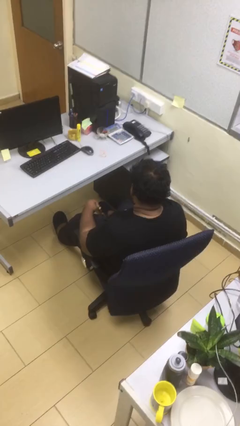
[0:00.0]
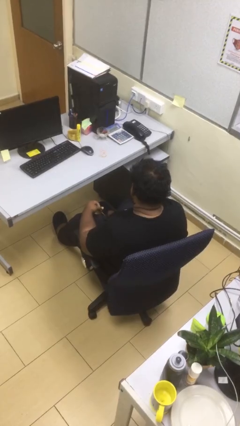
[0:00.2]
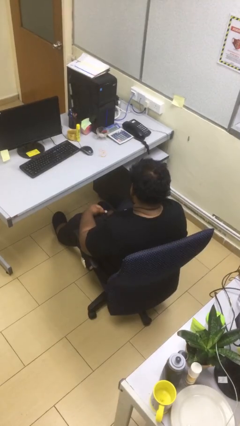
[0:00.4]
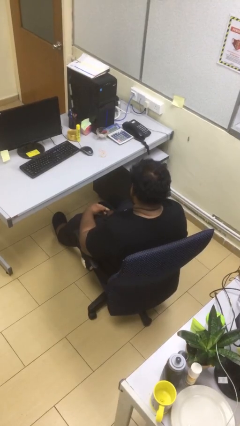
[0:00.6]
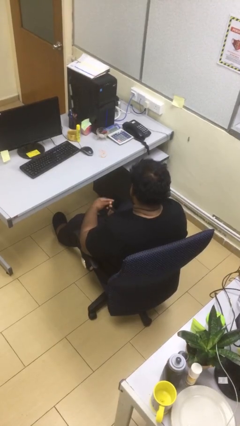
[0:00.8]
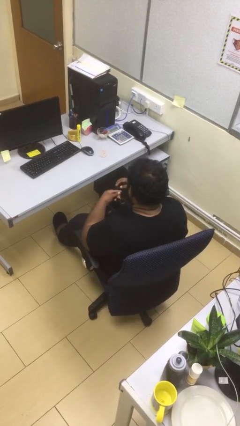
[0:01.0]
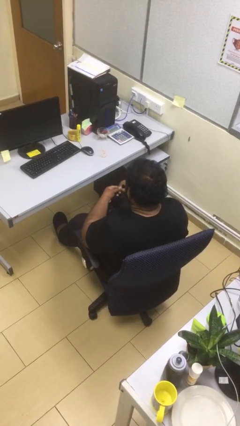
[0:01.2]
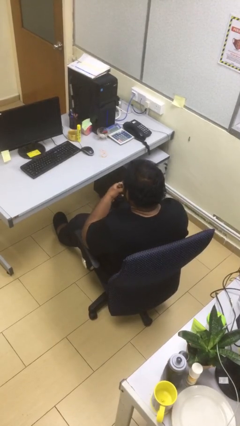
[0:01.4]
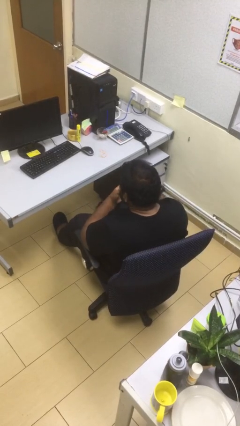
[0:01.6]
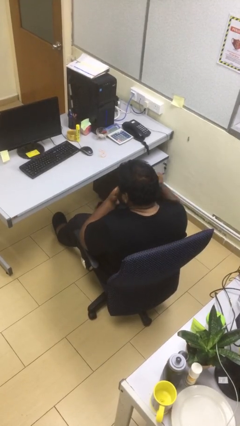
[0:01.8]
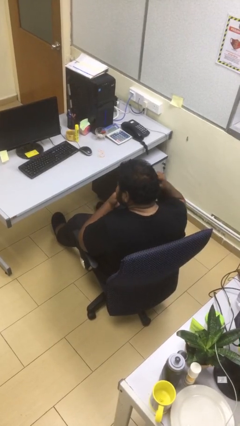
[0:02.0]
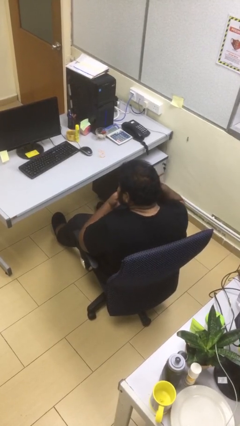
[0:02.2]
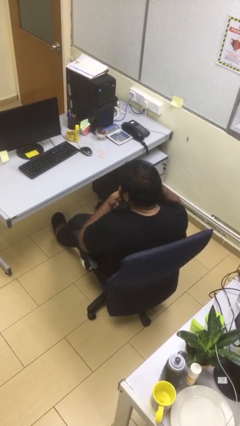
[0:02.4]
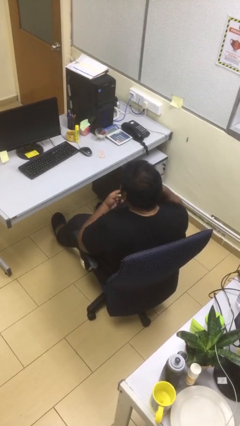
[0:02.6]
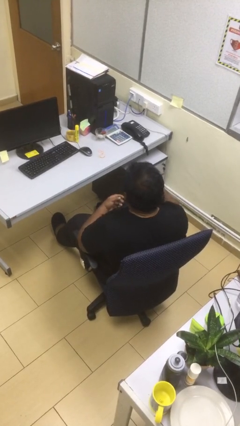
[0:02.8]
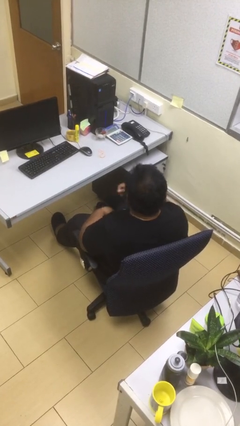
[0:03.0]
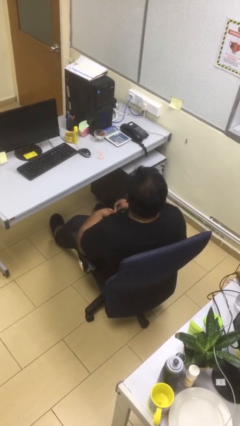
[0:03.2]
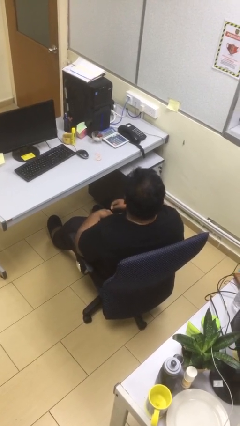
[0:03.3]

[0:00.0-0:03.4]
person puts on earrings

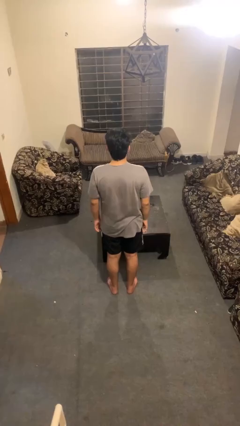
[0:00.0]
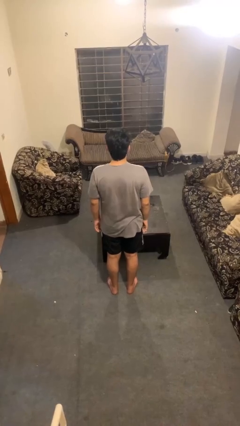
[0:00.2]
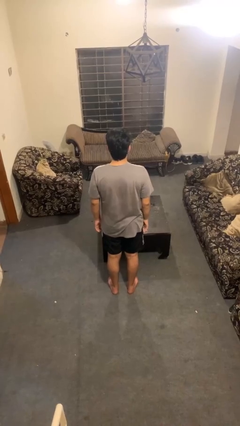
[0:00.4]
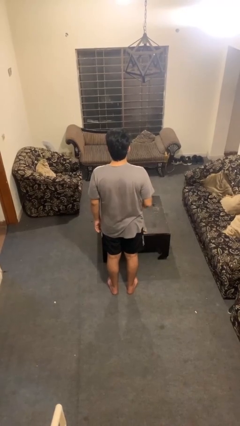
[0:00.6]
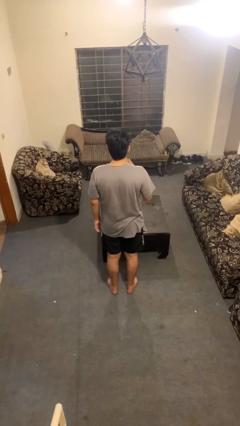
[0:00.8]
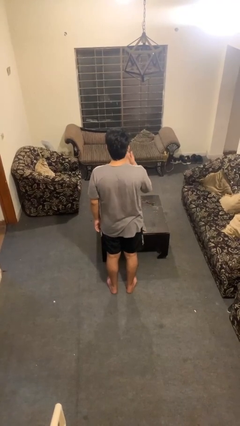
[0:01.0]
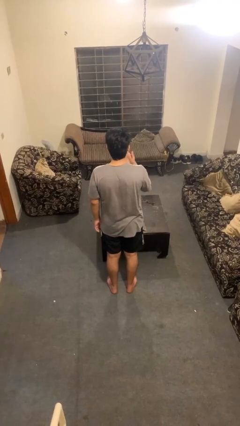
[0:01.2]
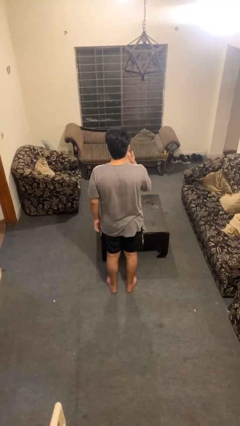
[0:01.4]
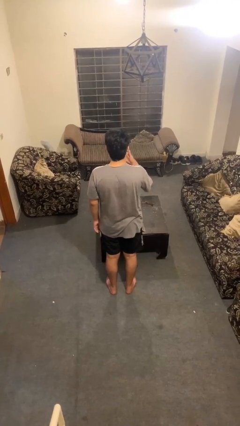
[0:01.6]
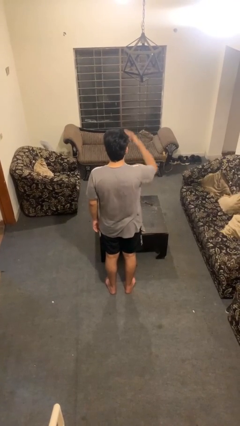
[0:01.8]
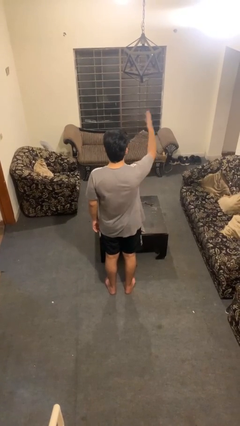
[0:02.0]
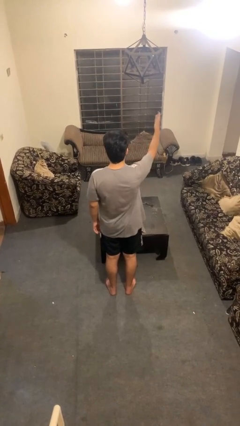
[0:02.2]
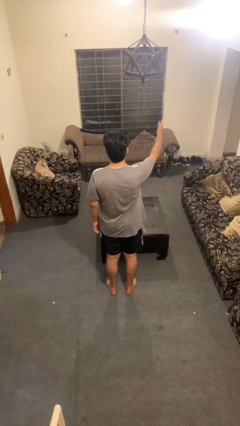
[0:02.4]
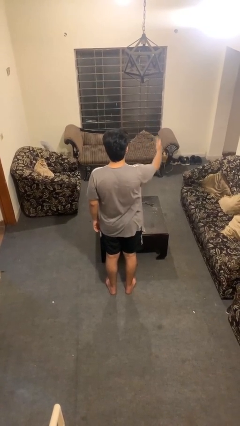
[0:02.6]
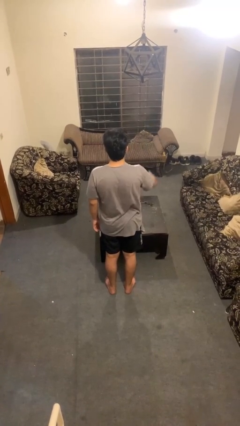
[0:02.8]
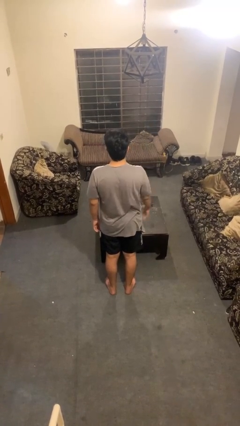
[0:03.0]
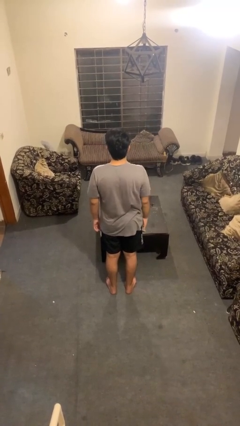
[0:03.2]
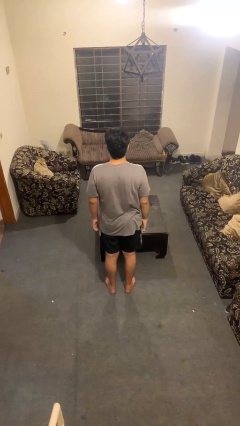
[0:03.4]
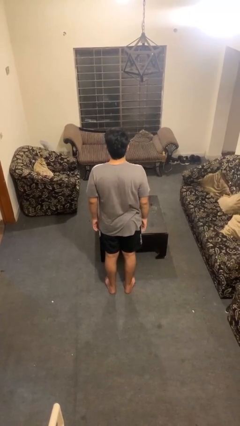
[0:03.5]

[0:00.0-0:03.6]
person gestures blow kiss

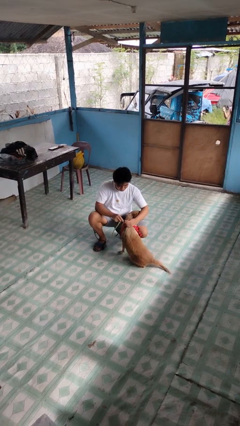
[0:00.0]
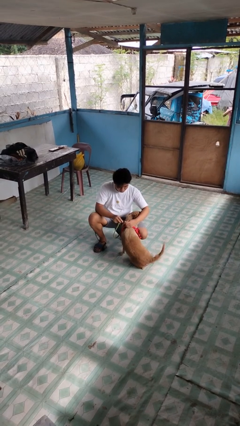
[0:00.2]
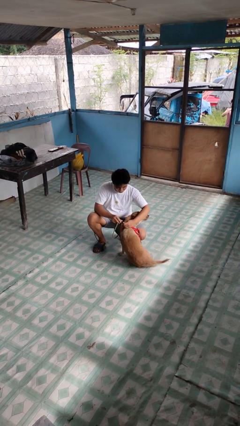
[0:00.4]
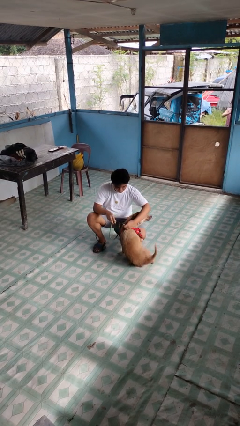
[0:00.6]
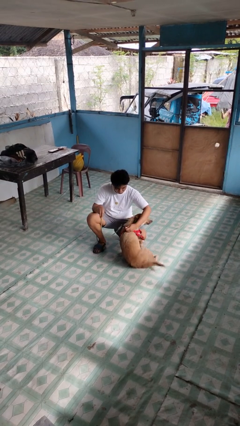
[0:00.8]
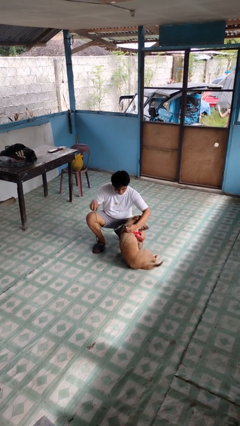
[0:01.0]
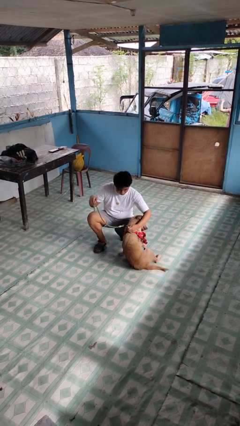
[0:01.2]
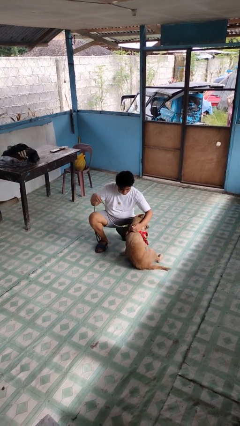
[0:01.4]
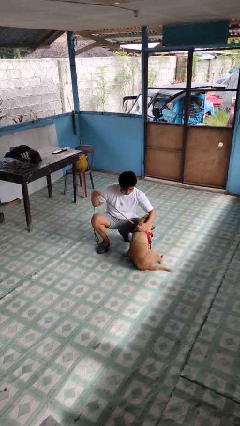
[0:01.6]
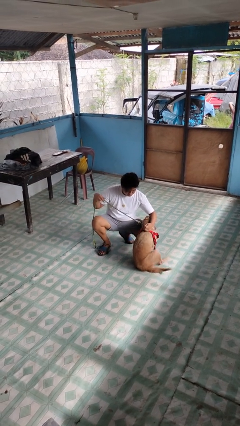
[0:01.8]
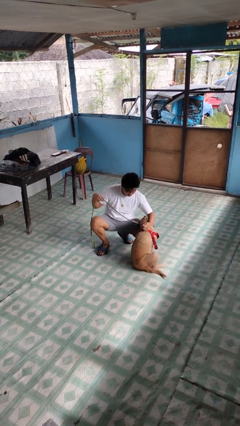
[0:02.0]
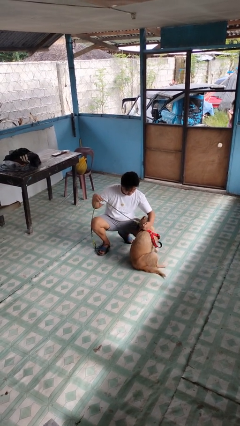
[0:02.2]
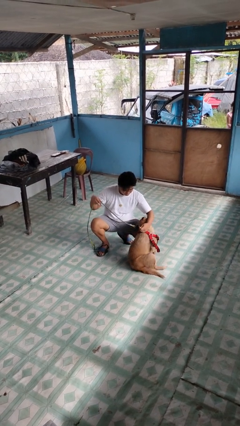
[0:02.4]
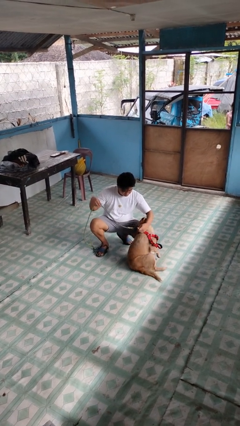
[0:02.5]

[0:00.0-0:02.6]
person attaches leash to dog

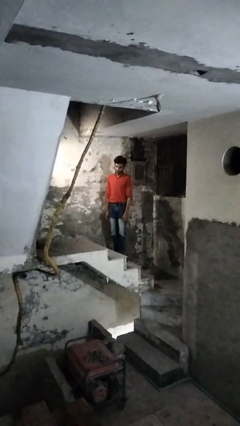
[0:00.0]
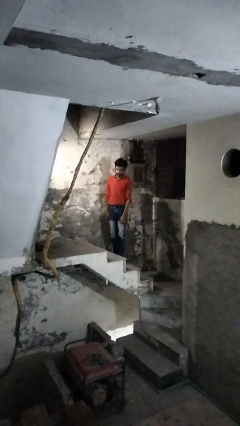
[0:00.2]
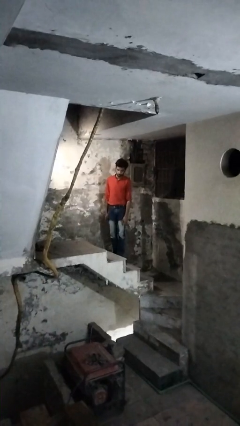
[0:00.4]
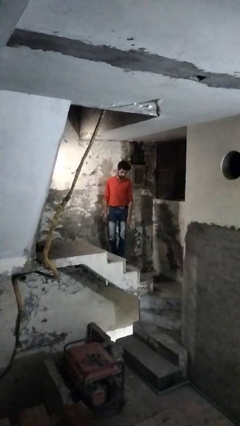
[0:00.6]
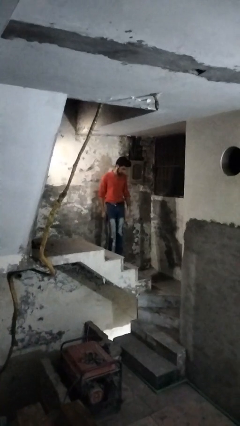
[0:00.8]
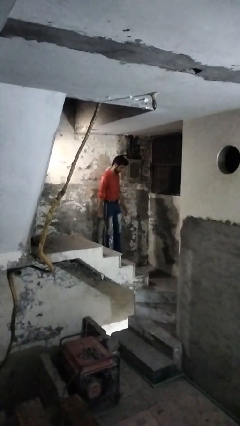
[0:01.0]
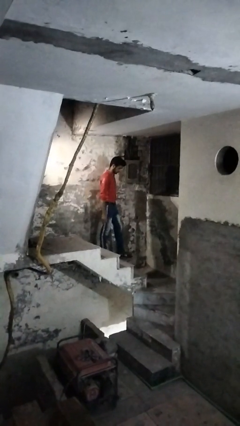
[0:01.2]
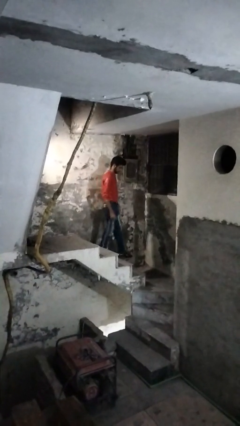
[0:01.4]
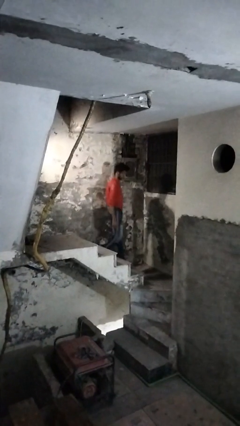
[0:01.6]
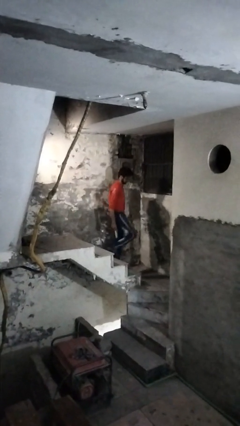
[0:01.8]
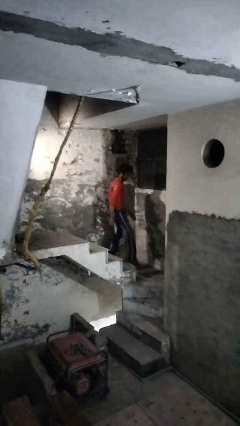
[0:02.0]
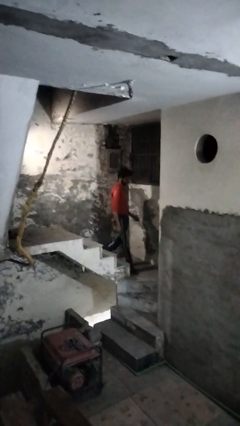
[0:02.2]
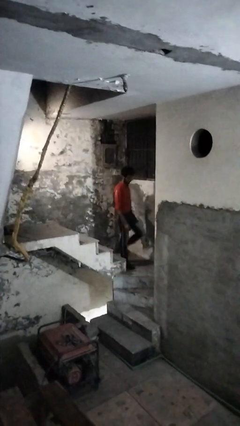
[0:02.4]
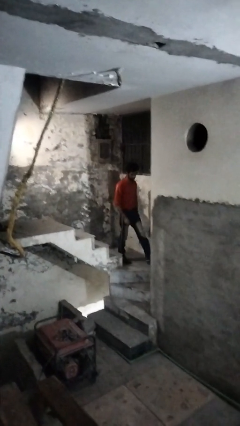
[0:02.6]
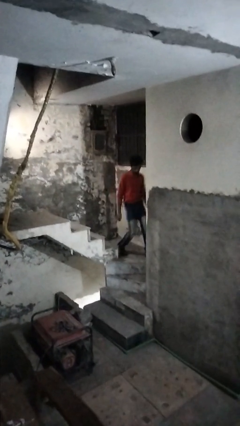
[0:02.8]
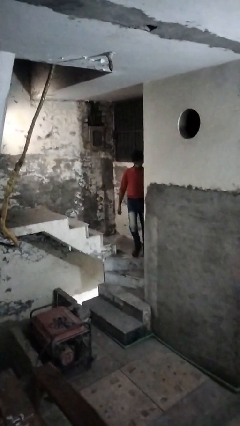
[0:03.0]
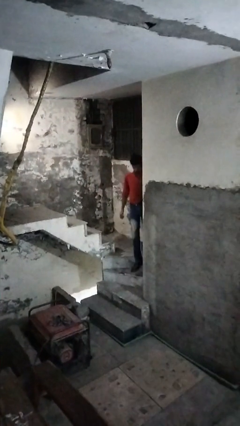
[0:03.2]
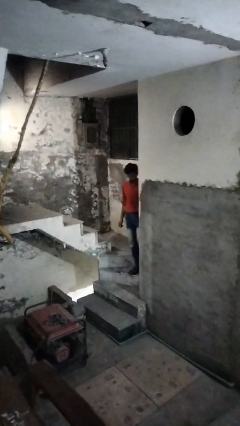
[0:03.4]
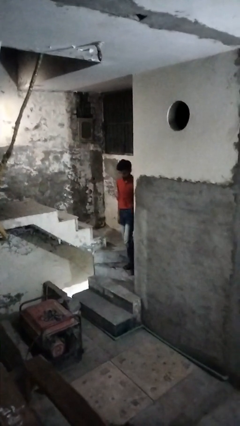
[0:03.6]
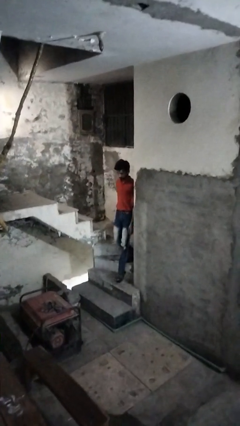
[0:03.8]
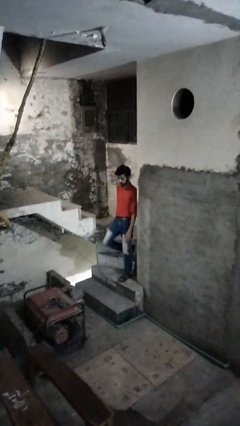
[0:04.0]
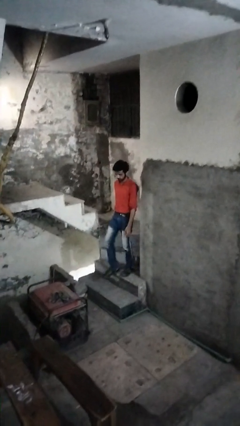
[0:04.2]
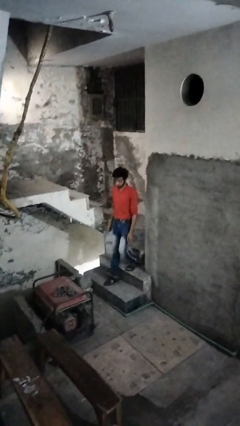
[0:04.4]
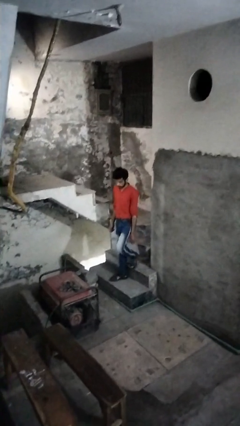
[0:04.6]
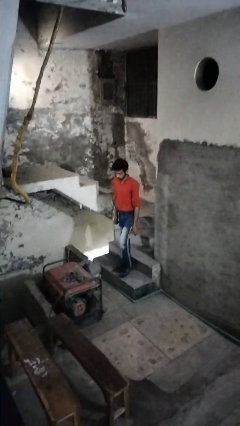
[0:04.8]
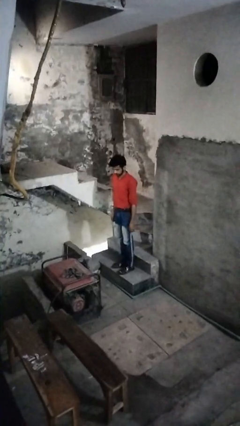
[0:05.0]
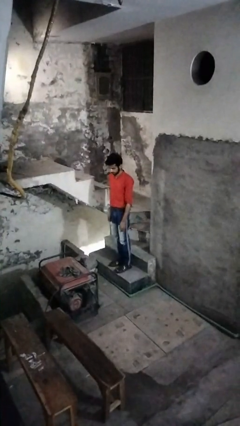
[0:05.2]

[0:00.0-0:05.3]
person climbs down stairs

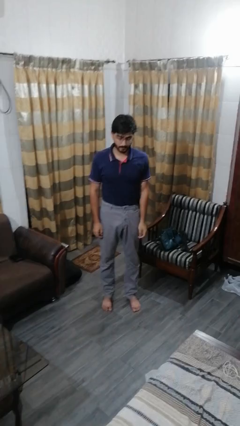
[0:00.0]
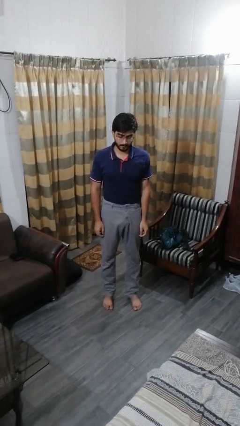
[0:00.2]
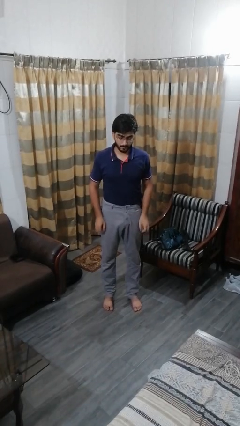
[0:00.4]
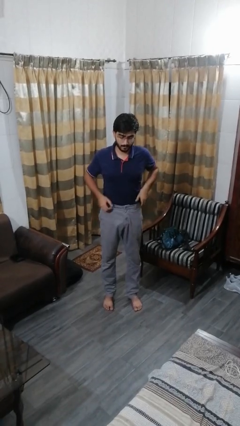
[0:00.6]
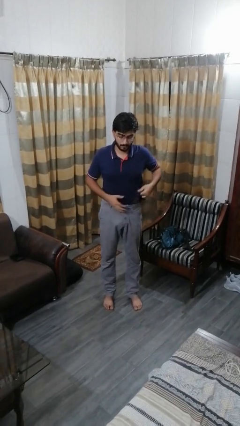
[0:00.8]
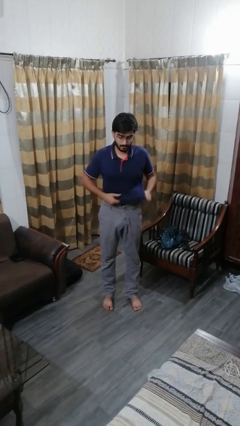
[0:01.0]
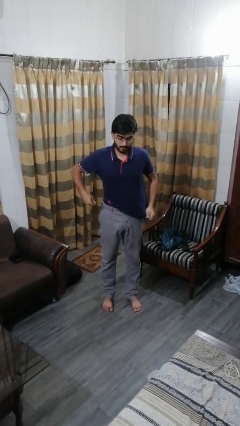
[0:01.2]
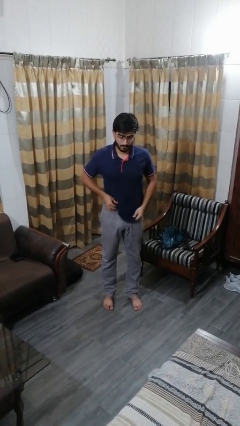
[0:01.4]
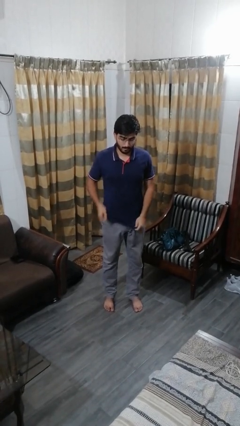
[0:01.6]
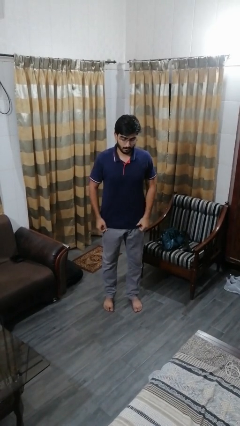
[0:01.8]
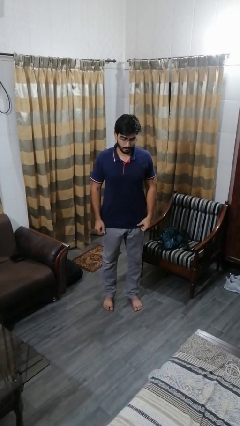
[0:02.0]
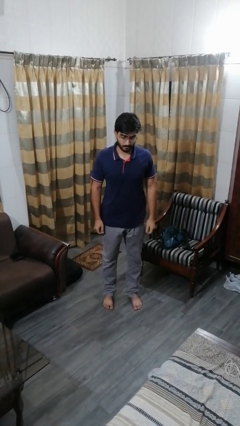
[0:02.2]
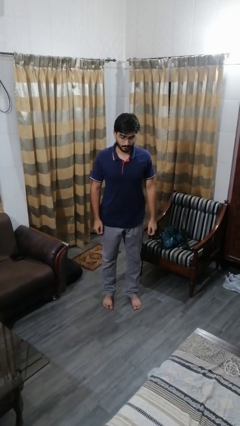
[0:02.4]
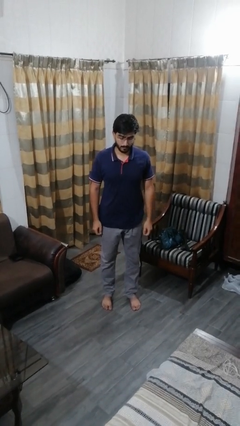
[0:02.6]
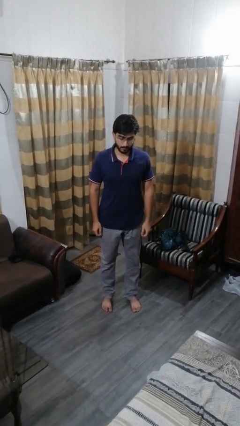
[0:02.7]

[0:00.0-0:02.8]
person untucks shirt

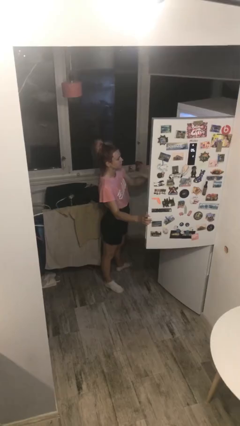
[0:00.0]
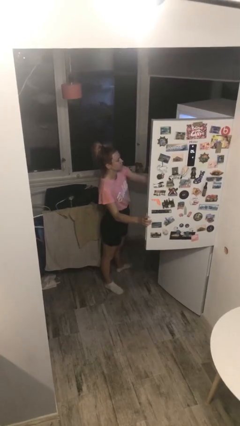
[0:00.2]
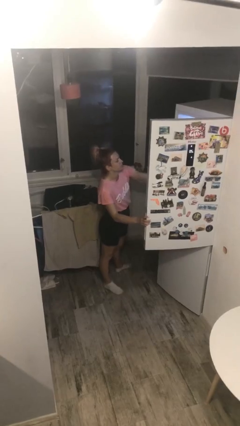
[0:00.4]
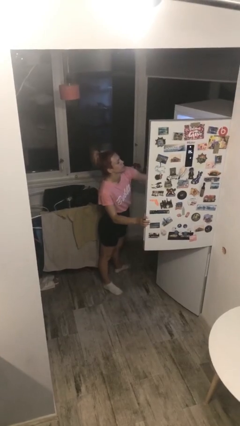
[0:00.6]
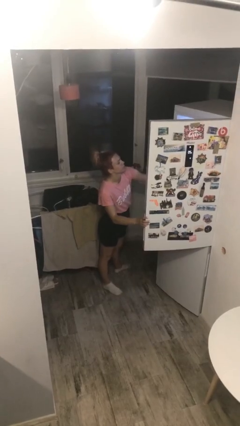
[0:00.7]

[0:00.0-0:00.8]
person puts object into refrigerator
